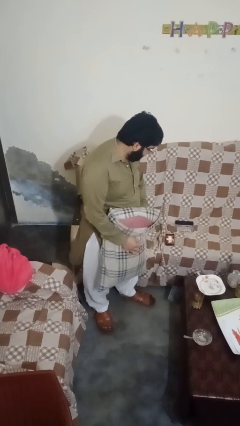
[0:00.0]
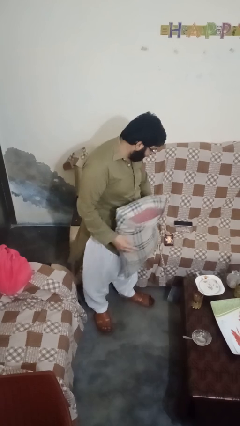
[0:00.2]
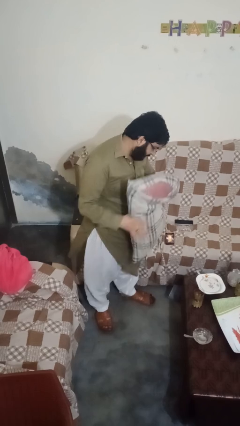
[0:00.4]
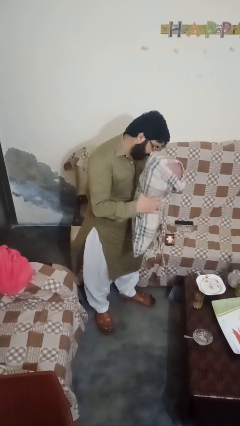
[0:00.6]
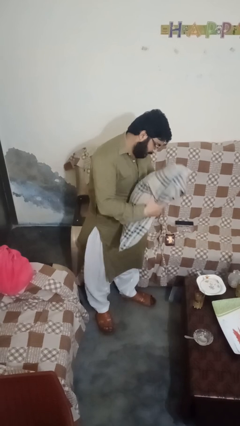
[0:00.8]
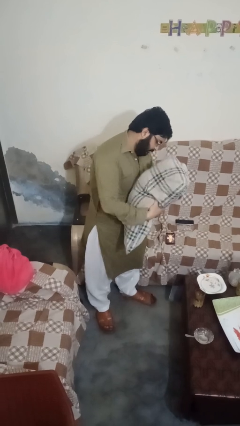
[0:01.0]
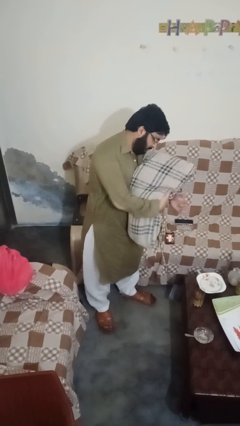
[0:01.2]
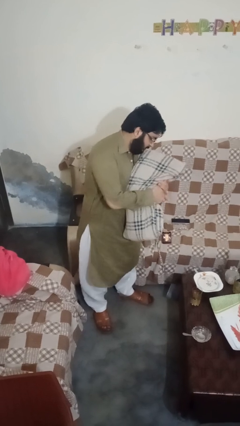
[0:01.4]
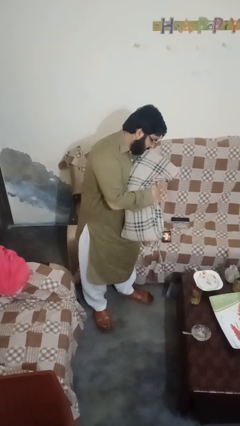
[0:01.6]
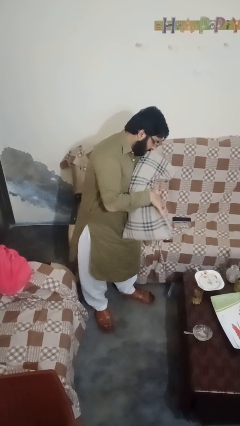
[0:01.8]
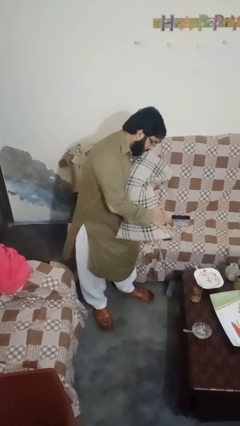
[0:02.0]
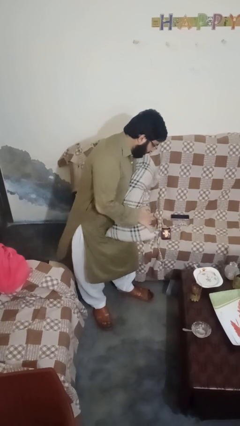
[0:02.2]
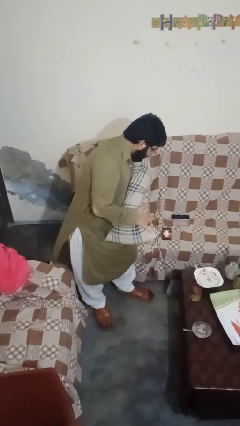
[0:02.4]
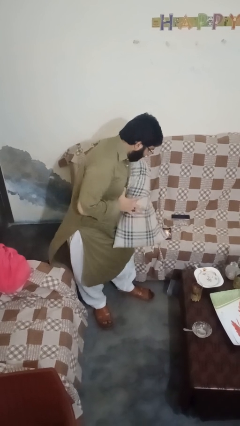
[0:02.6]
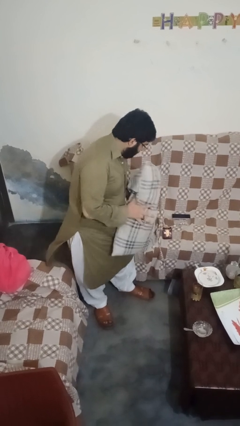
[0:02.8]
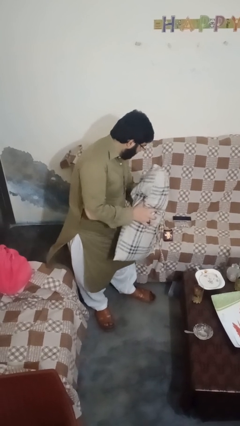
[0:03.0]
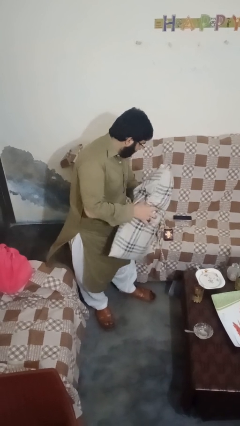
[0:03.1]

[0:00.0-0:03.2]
person squeezes object

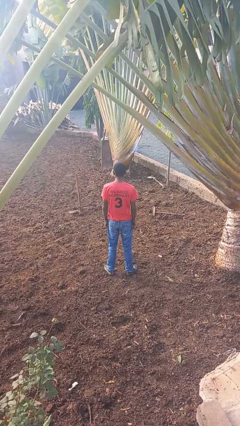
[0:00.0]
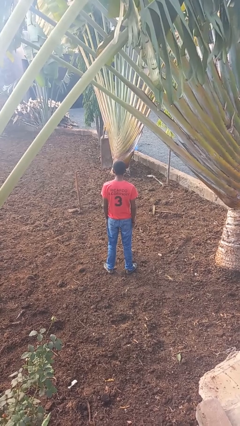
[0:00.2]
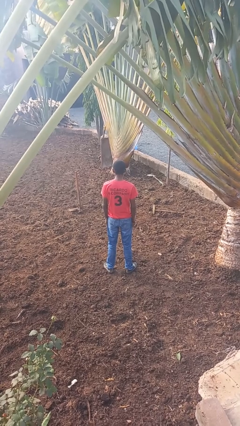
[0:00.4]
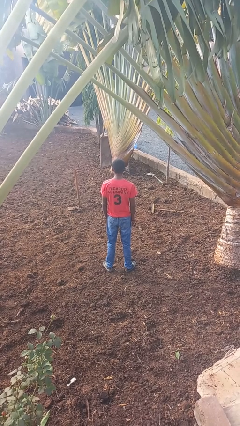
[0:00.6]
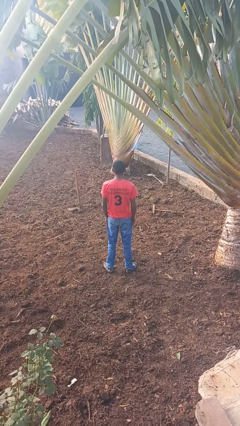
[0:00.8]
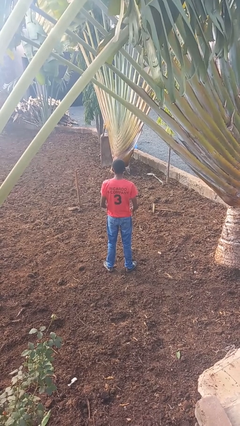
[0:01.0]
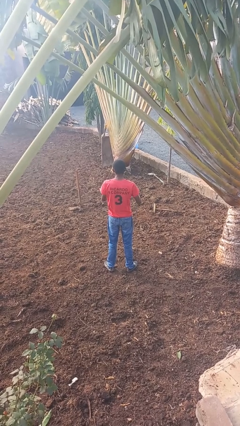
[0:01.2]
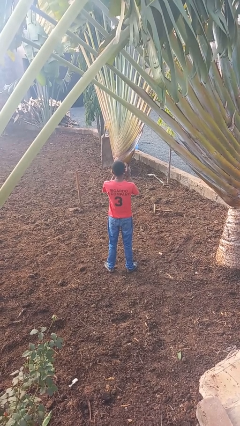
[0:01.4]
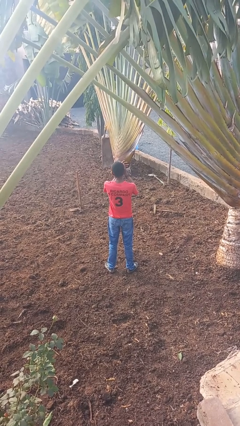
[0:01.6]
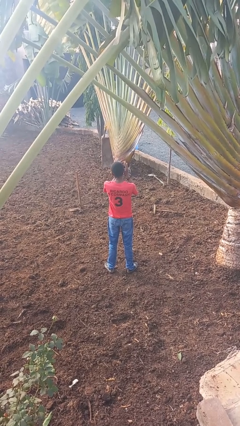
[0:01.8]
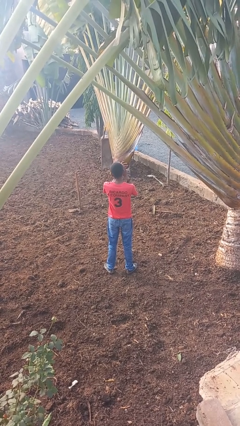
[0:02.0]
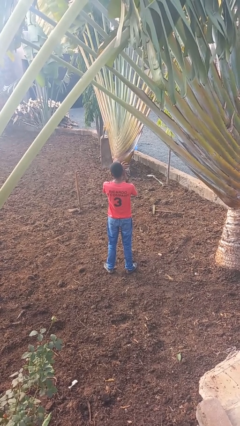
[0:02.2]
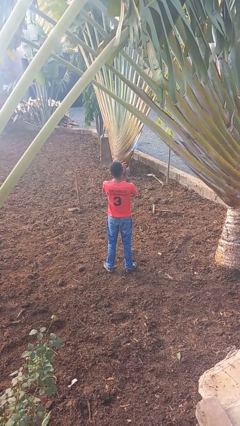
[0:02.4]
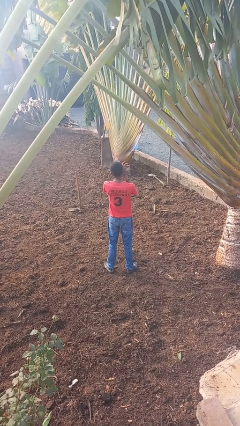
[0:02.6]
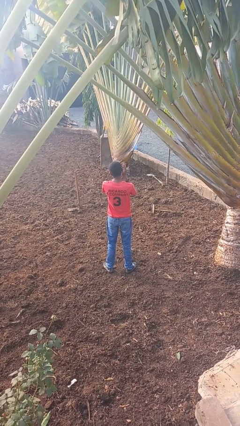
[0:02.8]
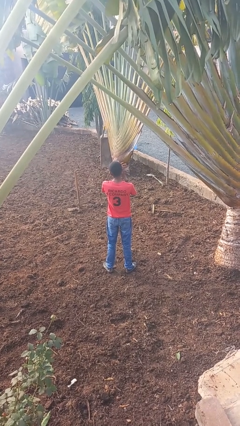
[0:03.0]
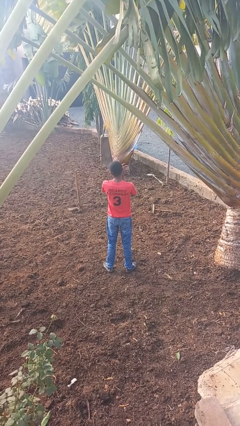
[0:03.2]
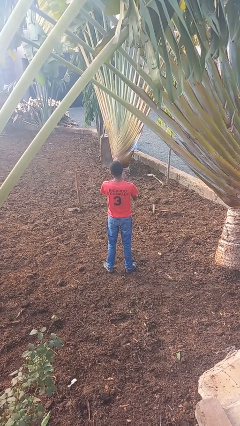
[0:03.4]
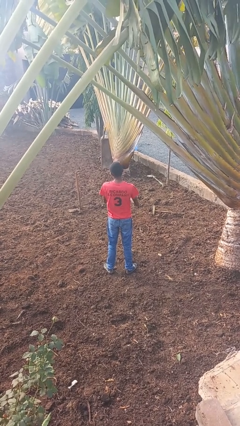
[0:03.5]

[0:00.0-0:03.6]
person claps hands

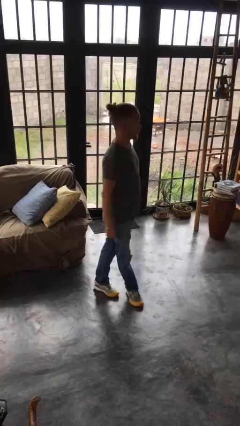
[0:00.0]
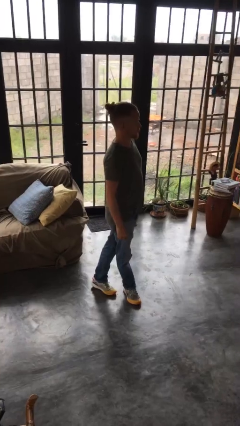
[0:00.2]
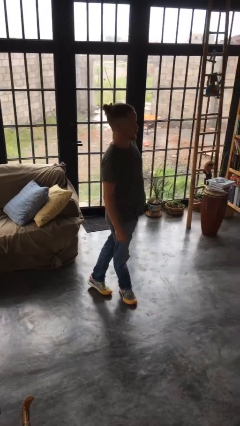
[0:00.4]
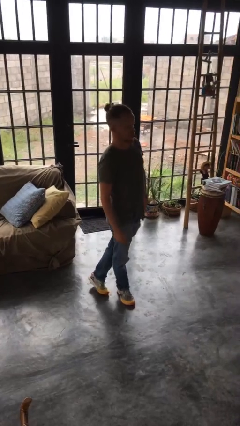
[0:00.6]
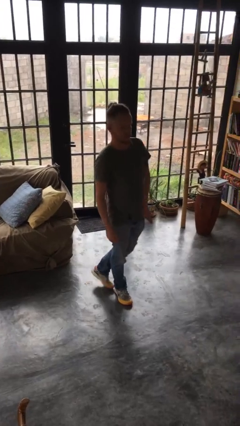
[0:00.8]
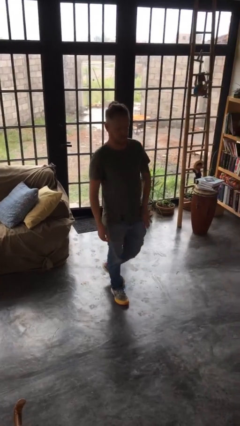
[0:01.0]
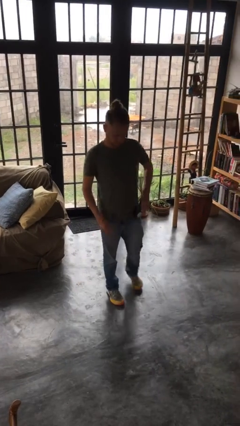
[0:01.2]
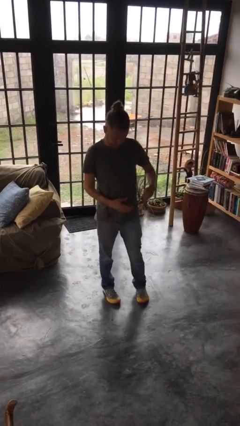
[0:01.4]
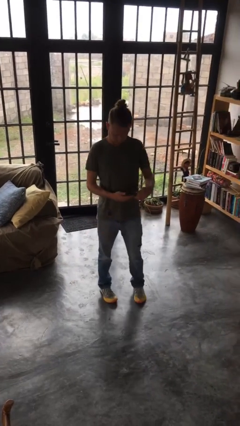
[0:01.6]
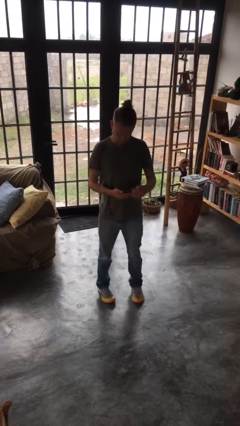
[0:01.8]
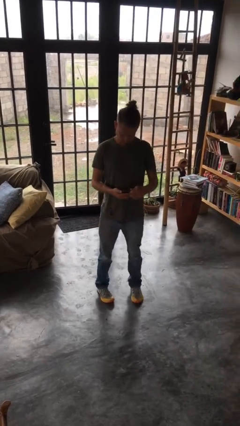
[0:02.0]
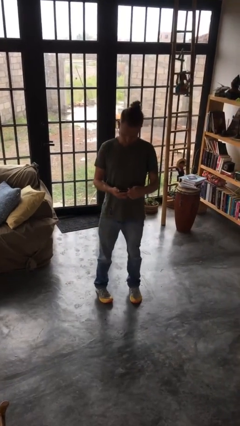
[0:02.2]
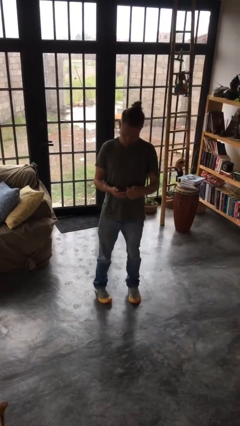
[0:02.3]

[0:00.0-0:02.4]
person takes phone from pocket

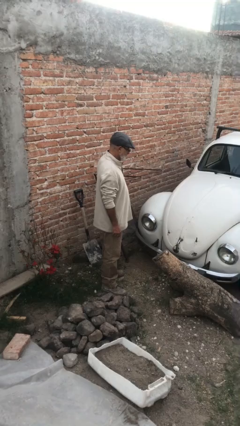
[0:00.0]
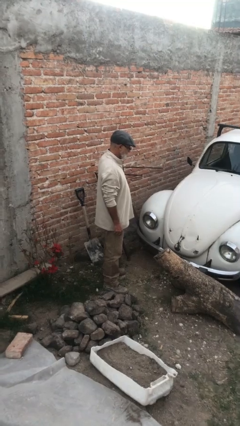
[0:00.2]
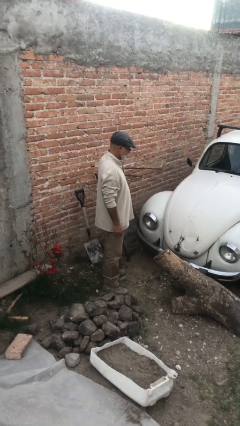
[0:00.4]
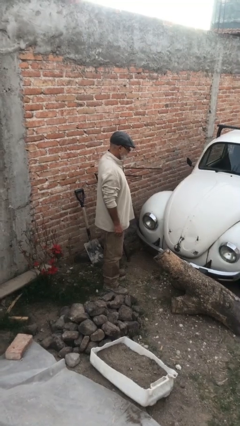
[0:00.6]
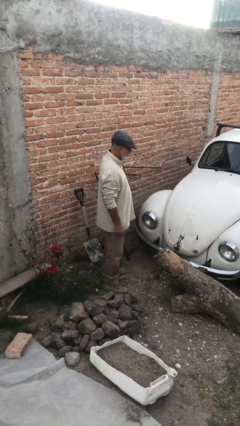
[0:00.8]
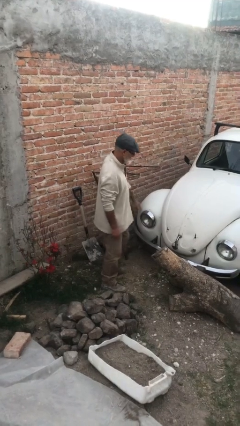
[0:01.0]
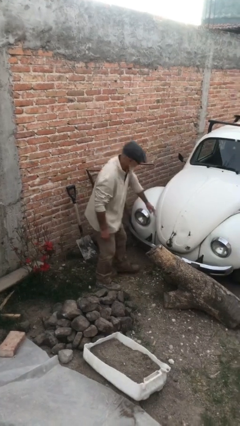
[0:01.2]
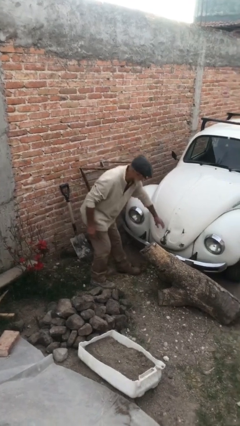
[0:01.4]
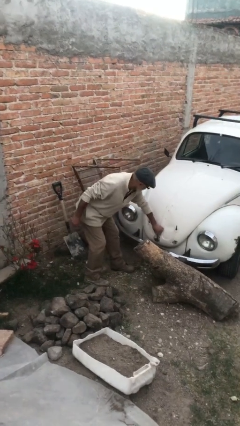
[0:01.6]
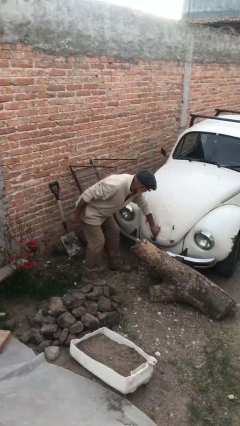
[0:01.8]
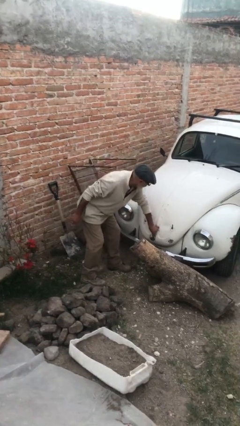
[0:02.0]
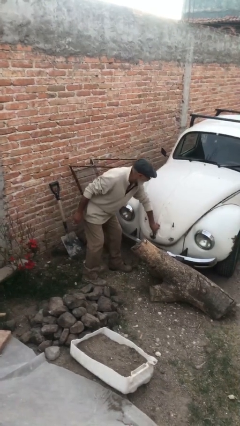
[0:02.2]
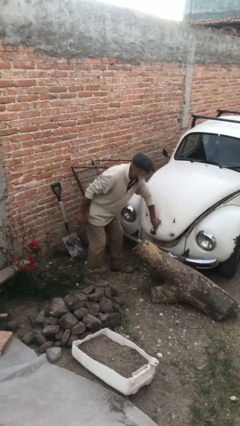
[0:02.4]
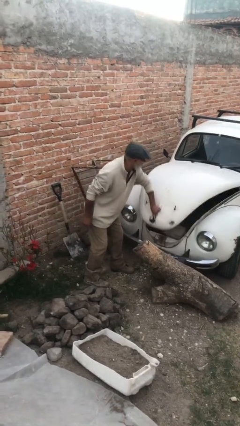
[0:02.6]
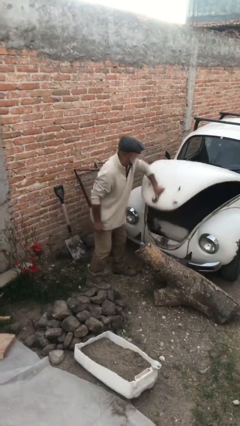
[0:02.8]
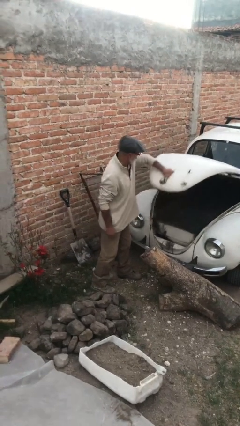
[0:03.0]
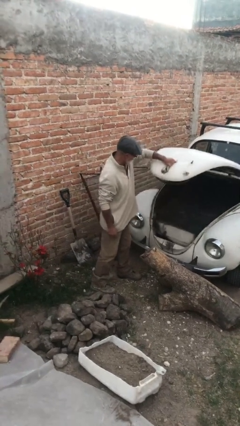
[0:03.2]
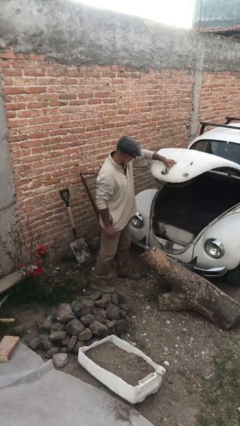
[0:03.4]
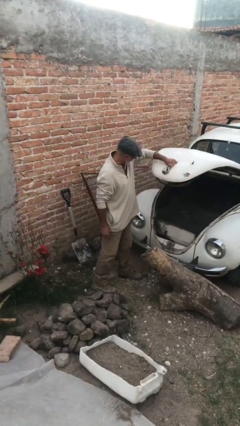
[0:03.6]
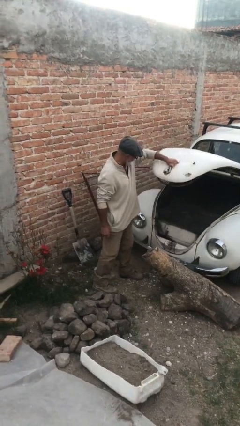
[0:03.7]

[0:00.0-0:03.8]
person opens car trunk

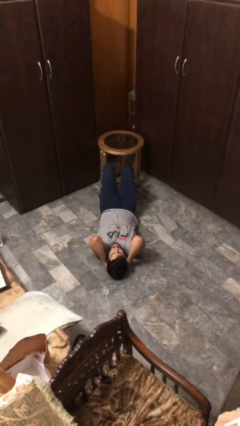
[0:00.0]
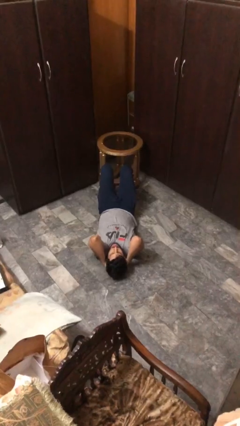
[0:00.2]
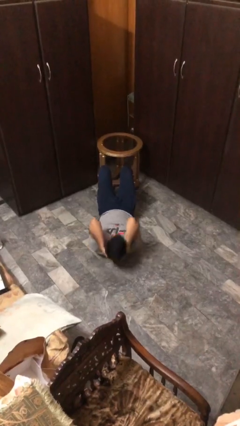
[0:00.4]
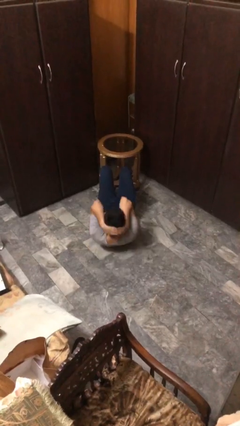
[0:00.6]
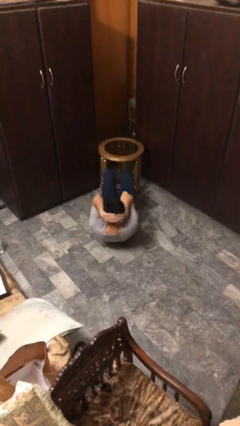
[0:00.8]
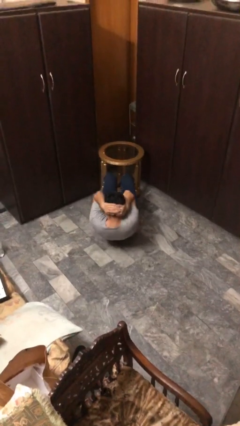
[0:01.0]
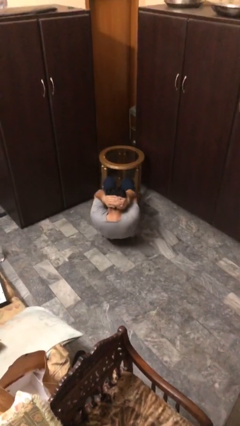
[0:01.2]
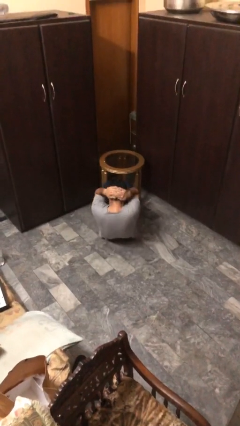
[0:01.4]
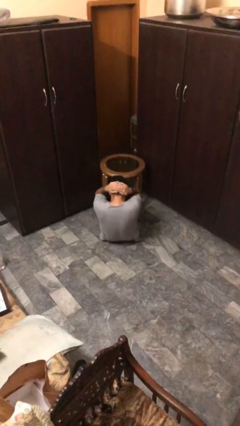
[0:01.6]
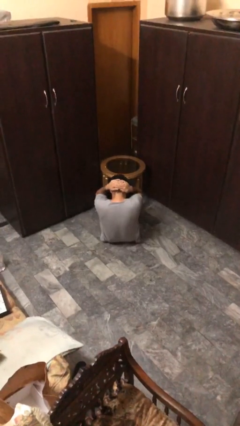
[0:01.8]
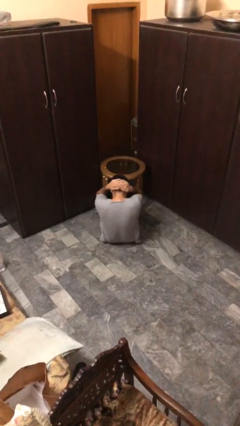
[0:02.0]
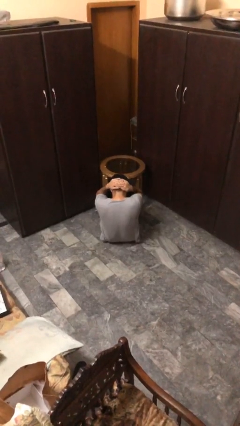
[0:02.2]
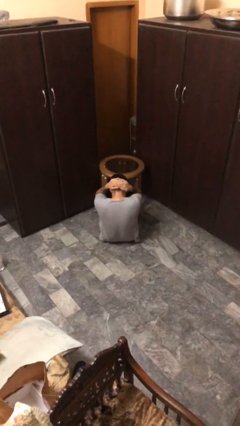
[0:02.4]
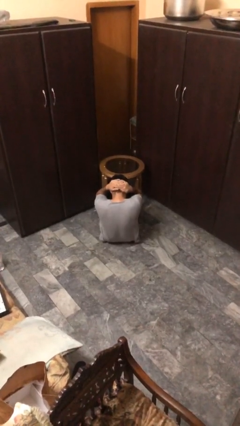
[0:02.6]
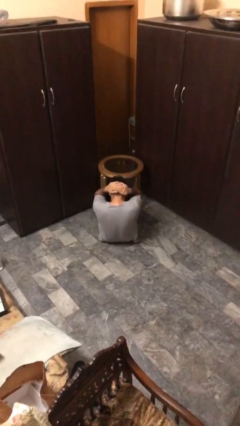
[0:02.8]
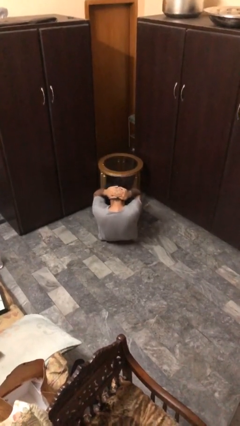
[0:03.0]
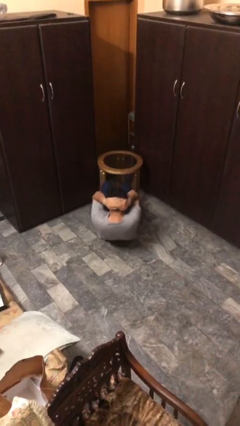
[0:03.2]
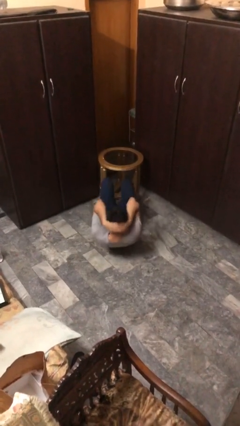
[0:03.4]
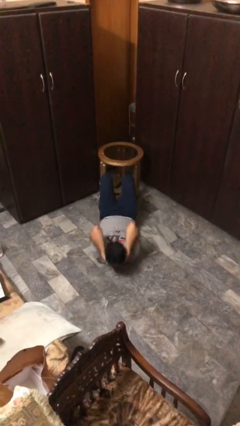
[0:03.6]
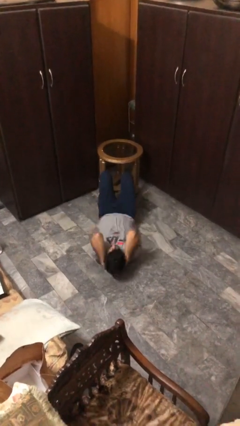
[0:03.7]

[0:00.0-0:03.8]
person exercises with situp

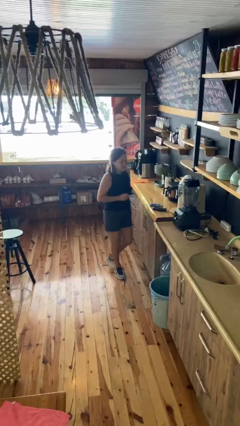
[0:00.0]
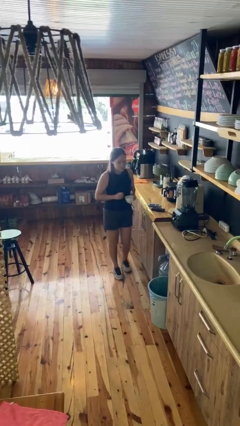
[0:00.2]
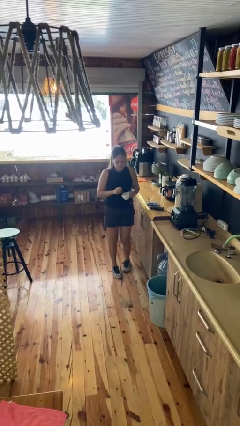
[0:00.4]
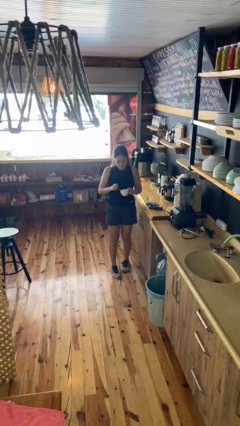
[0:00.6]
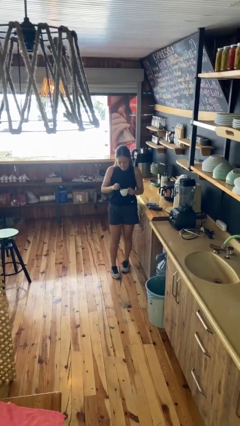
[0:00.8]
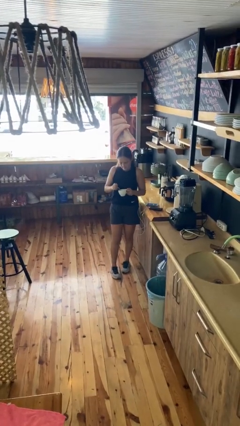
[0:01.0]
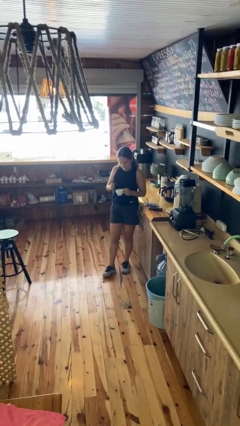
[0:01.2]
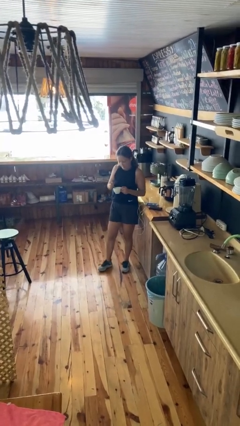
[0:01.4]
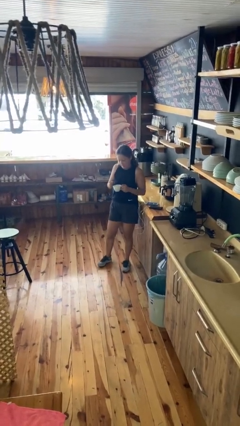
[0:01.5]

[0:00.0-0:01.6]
person stirs mug
